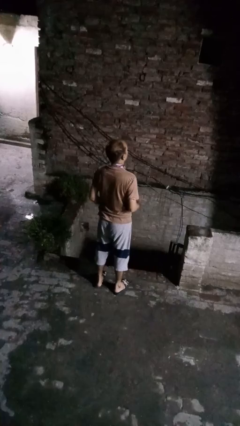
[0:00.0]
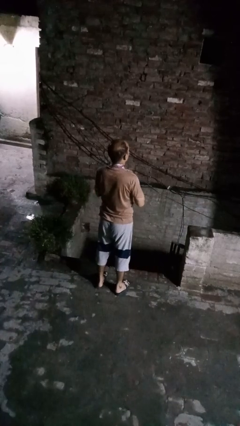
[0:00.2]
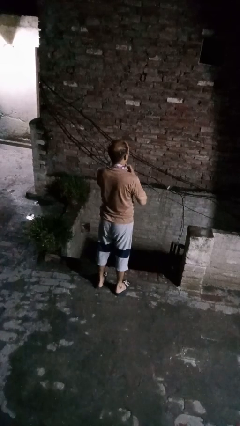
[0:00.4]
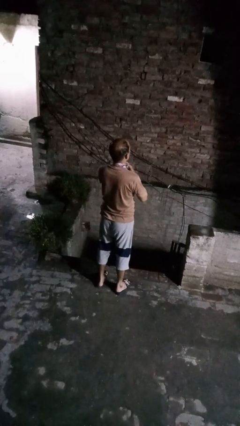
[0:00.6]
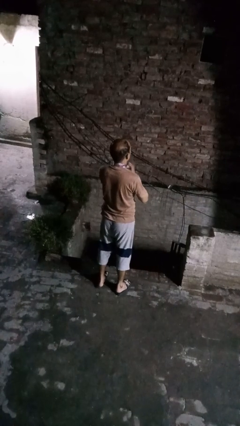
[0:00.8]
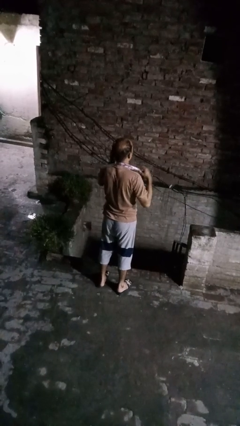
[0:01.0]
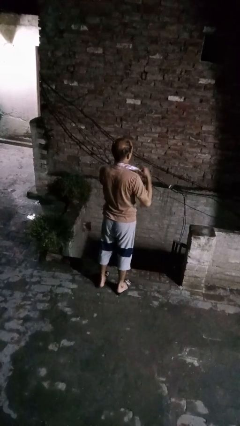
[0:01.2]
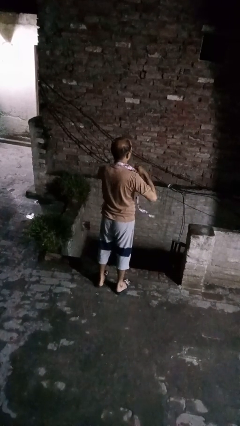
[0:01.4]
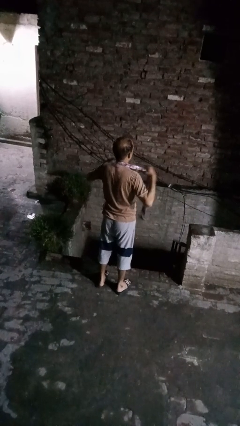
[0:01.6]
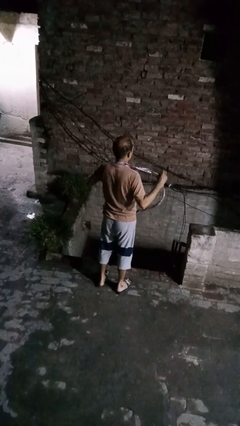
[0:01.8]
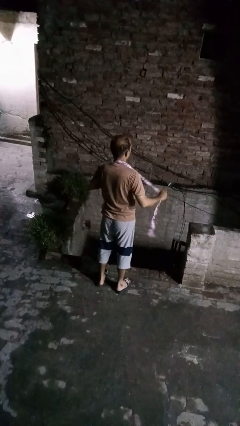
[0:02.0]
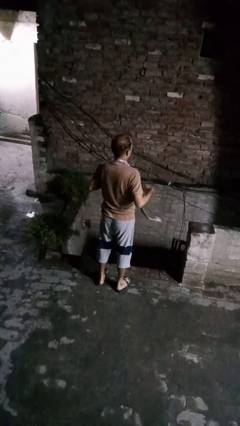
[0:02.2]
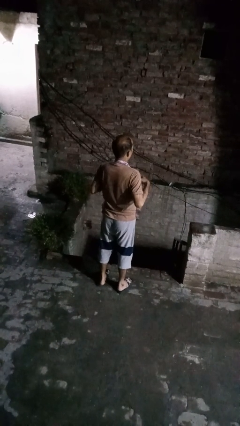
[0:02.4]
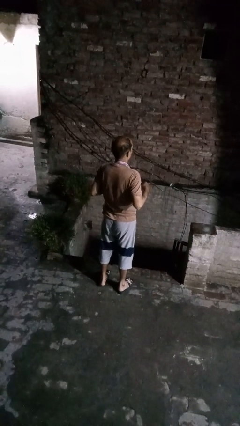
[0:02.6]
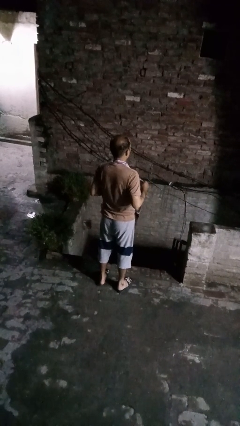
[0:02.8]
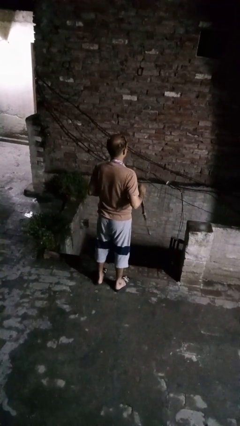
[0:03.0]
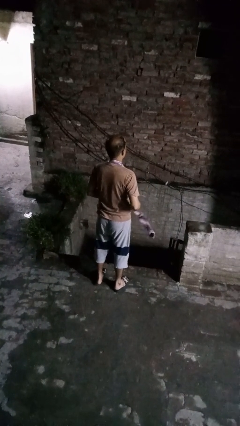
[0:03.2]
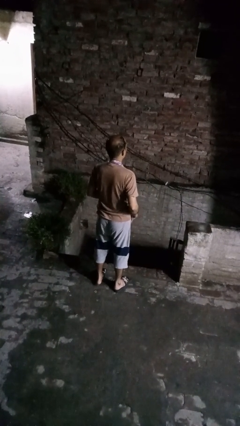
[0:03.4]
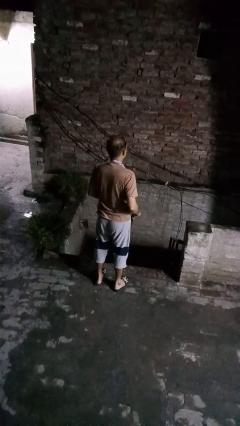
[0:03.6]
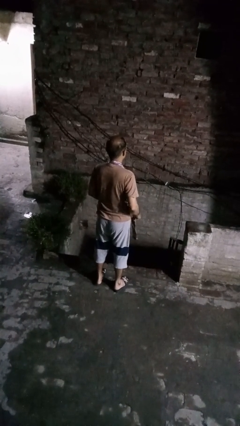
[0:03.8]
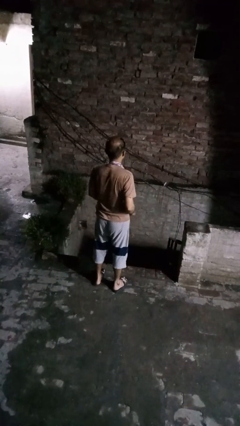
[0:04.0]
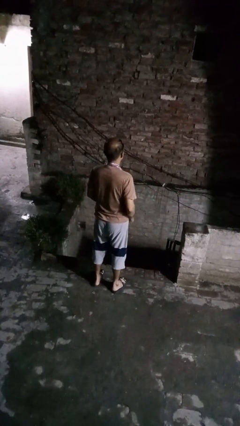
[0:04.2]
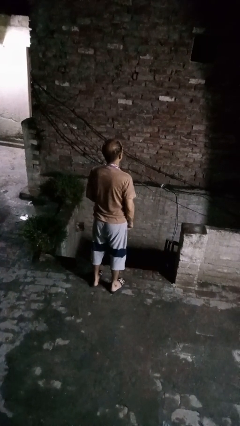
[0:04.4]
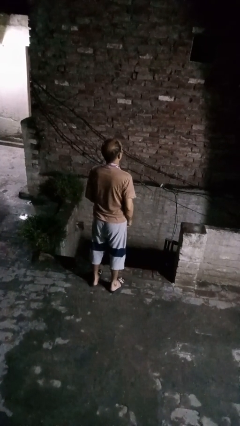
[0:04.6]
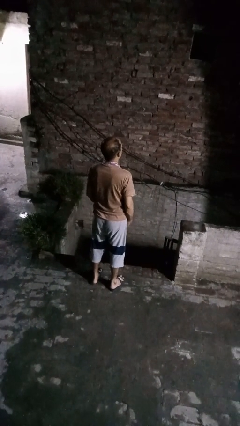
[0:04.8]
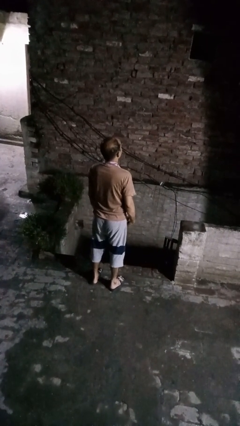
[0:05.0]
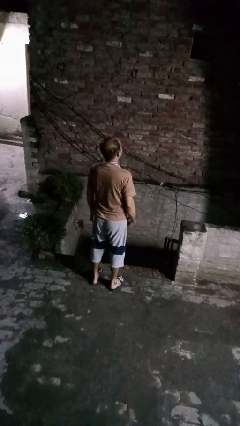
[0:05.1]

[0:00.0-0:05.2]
person takes off necktie

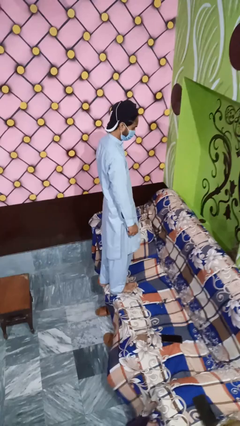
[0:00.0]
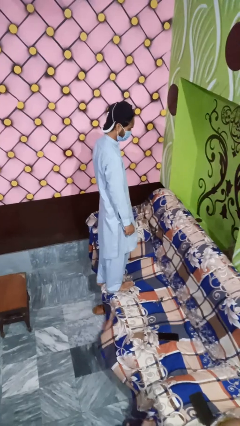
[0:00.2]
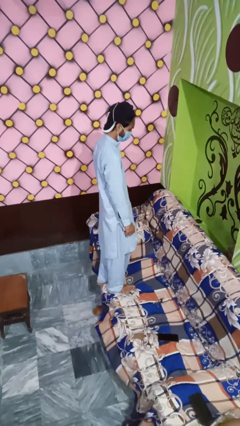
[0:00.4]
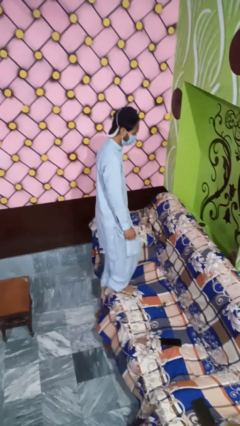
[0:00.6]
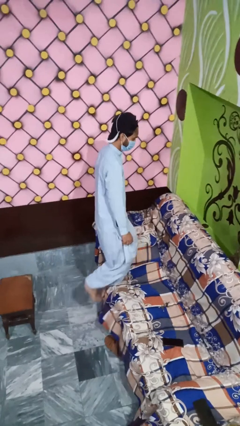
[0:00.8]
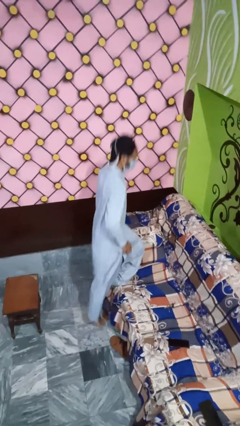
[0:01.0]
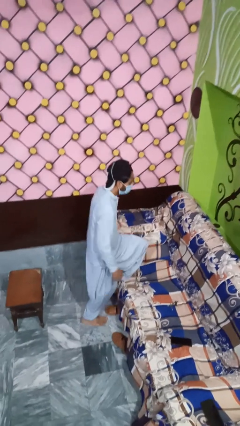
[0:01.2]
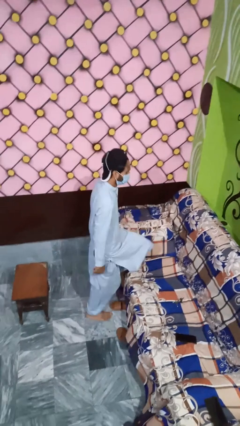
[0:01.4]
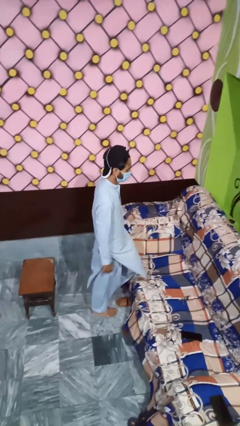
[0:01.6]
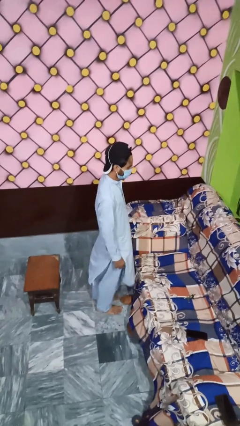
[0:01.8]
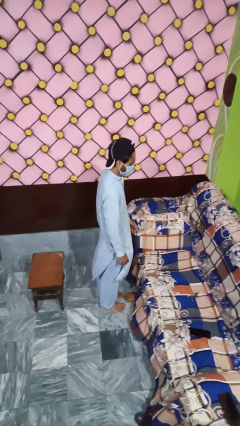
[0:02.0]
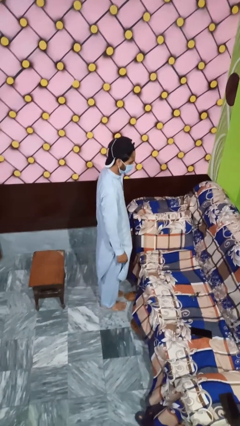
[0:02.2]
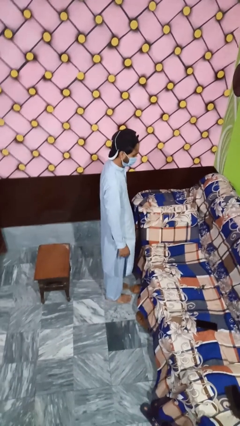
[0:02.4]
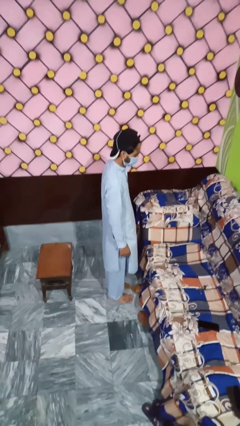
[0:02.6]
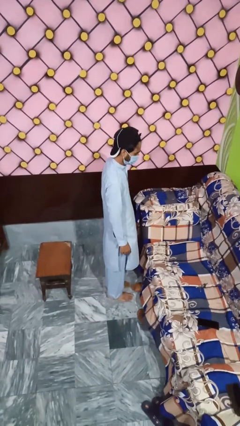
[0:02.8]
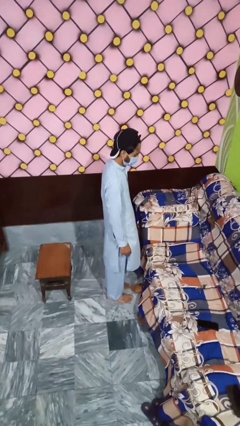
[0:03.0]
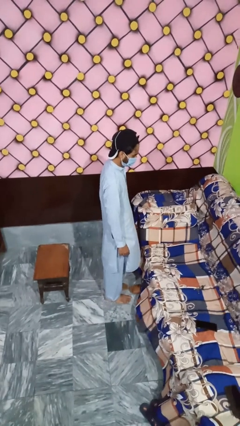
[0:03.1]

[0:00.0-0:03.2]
person climbs off couch

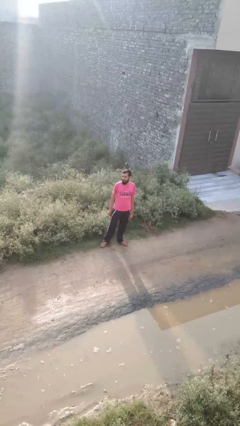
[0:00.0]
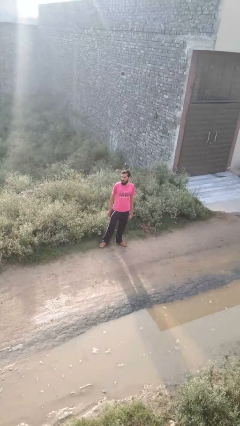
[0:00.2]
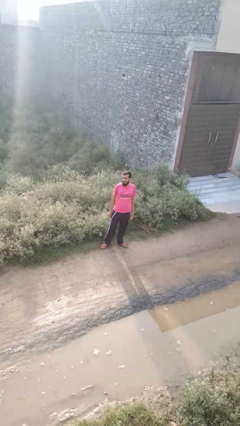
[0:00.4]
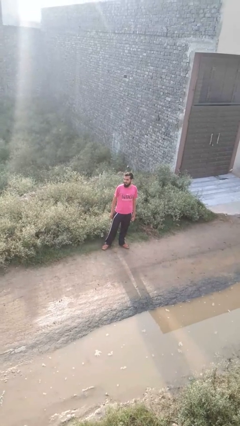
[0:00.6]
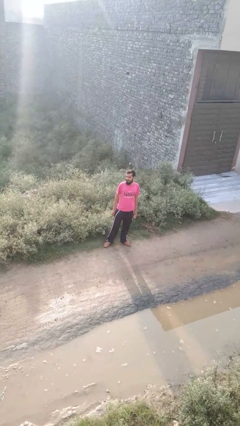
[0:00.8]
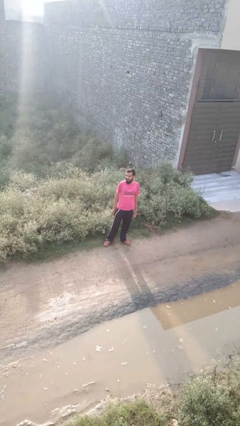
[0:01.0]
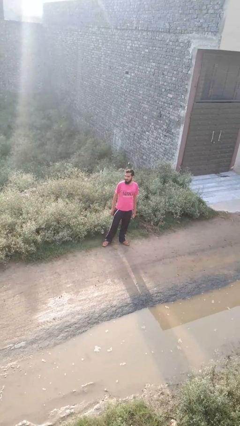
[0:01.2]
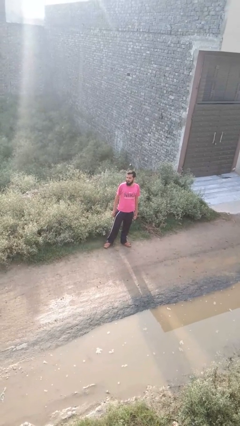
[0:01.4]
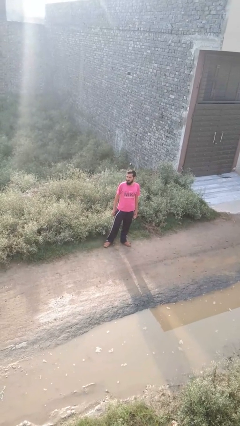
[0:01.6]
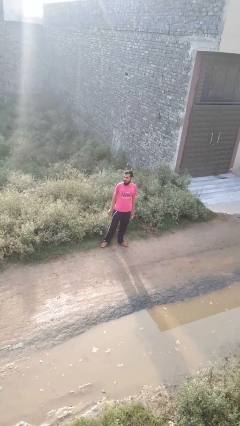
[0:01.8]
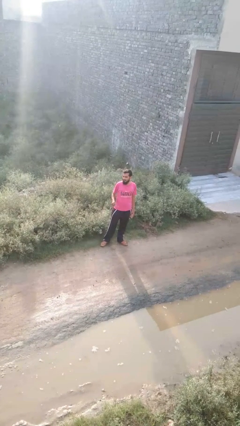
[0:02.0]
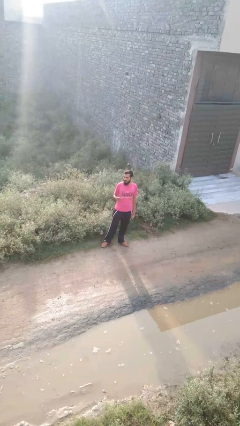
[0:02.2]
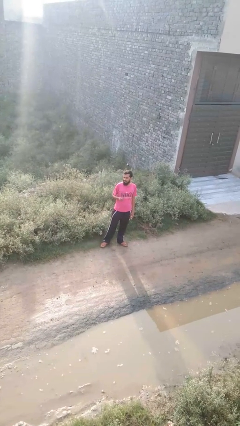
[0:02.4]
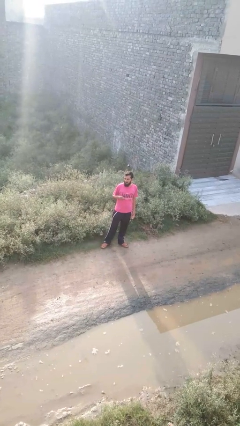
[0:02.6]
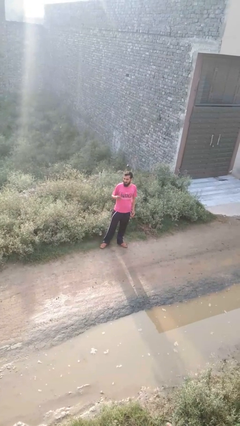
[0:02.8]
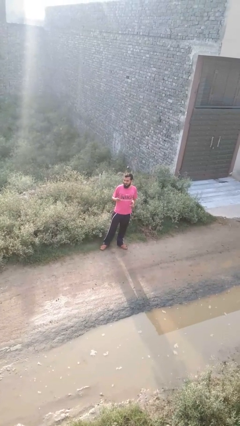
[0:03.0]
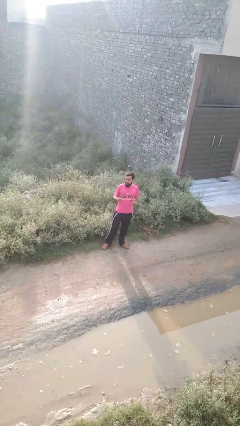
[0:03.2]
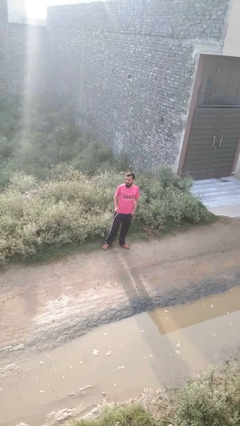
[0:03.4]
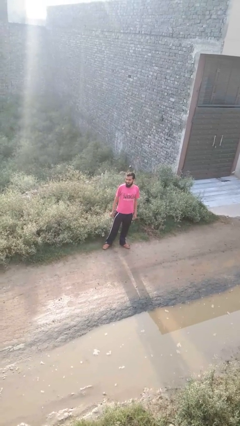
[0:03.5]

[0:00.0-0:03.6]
person snaps fingers

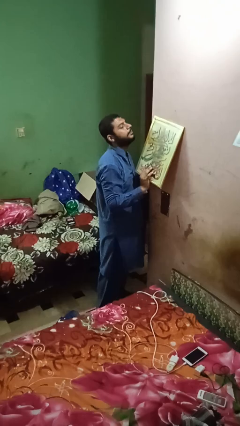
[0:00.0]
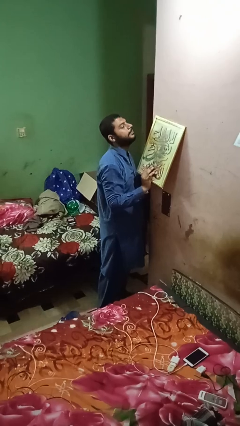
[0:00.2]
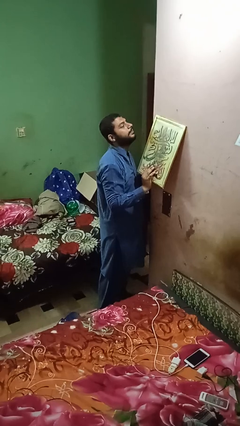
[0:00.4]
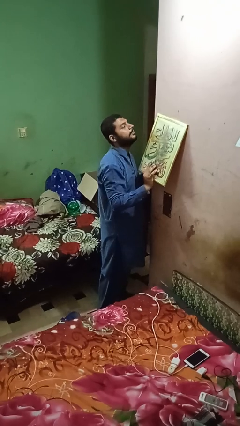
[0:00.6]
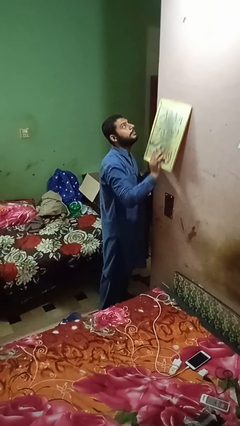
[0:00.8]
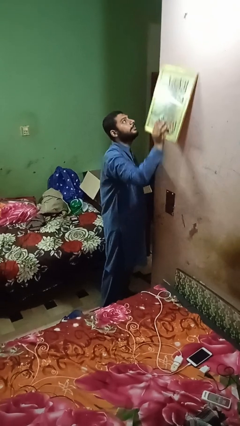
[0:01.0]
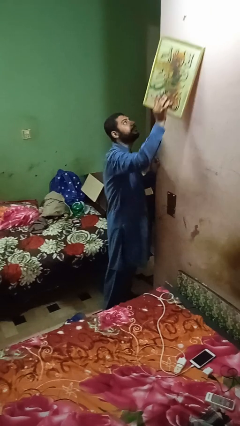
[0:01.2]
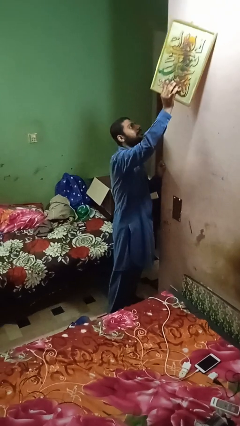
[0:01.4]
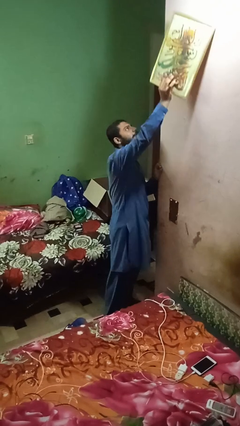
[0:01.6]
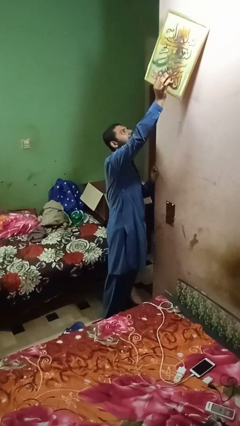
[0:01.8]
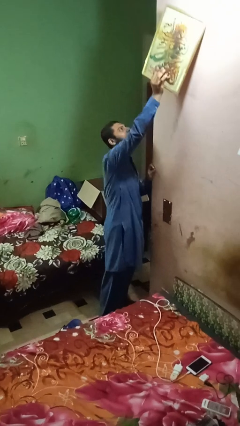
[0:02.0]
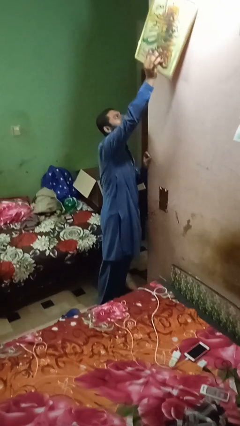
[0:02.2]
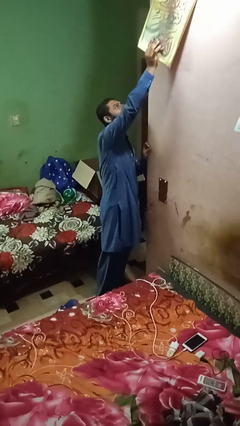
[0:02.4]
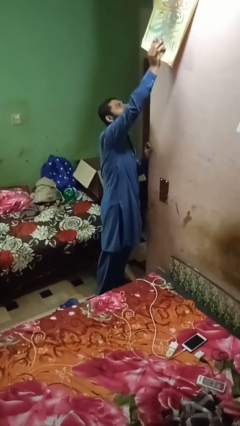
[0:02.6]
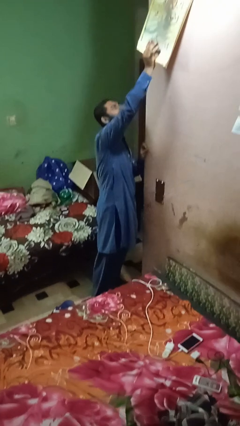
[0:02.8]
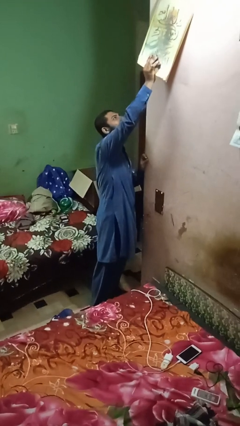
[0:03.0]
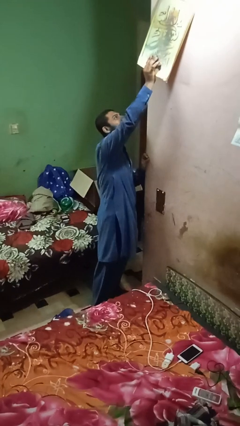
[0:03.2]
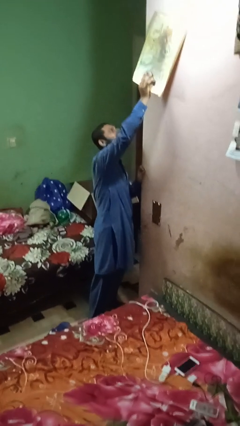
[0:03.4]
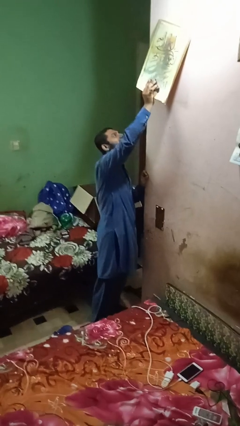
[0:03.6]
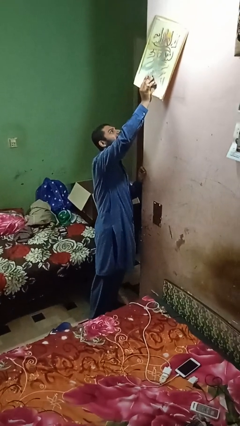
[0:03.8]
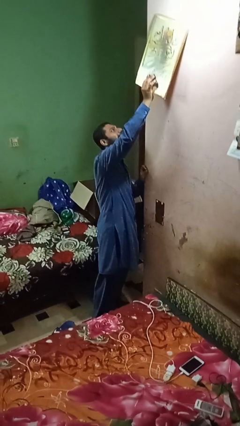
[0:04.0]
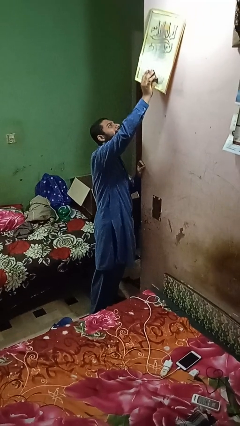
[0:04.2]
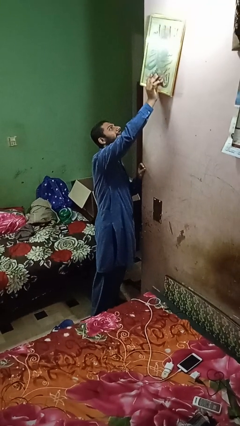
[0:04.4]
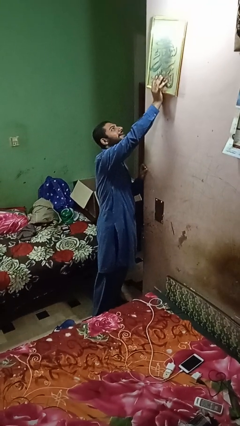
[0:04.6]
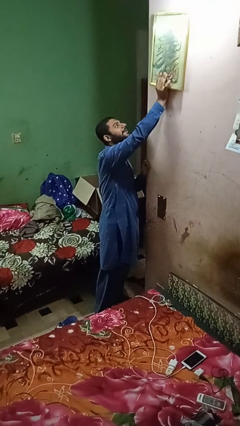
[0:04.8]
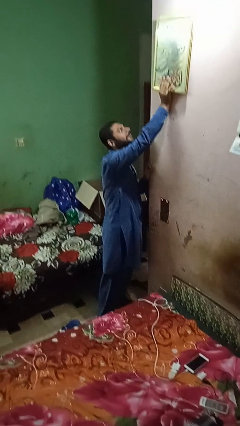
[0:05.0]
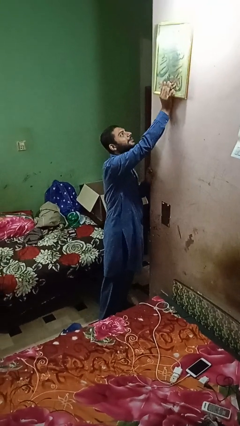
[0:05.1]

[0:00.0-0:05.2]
person puts up picture frame

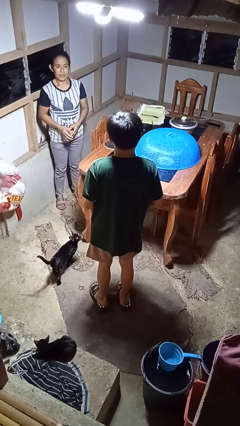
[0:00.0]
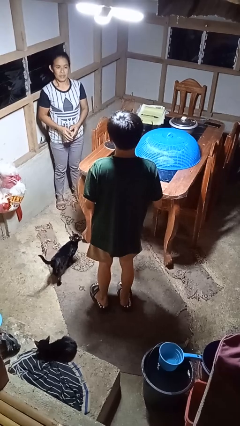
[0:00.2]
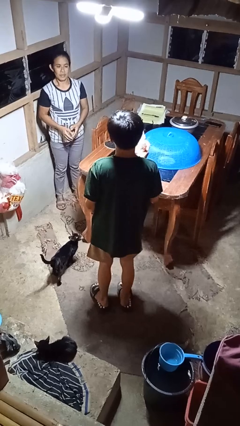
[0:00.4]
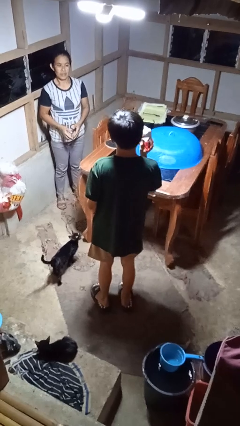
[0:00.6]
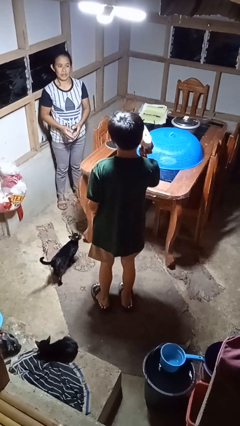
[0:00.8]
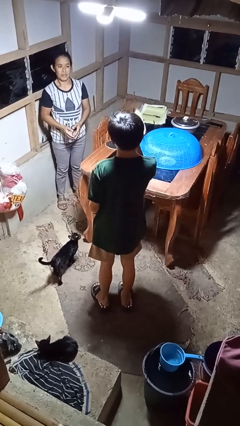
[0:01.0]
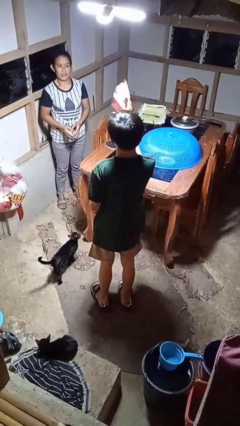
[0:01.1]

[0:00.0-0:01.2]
person throws object to person
